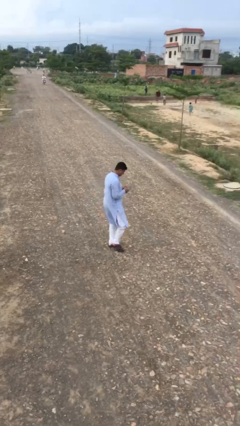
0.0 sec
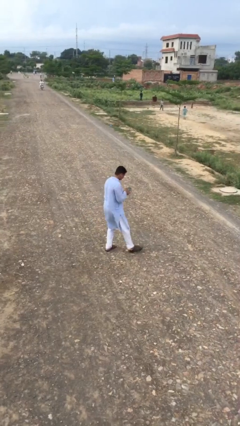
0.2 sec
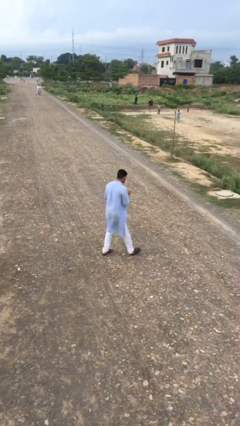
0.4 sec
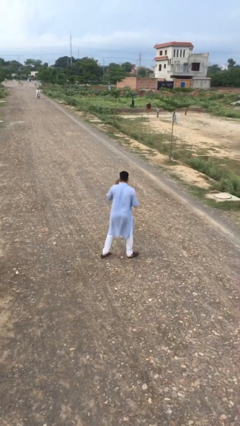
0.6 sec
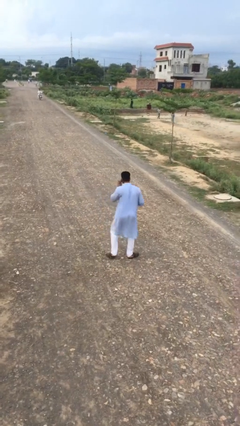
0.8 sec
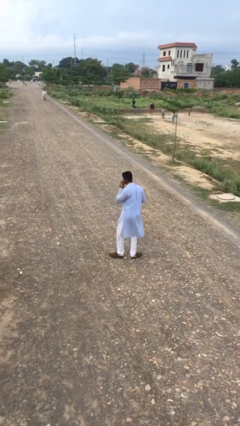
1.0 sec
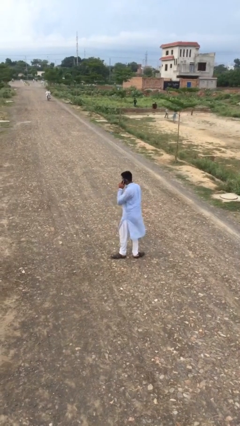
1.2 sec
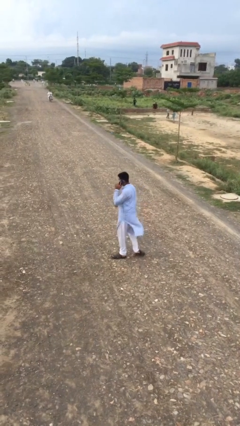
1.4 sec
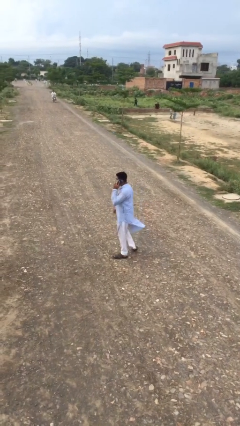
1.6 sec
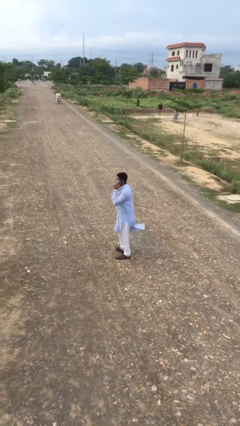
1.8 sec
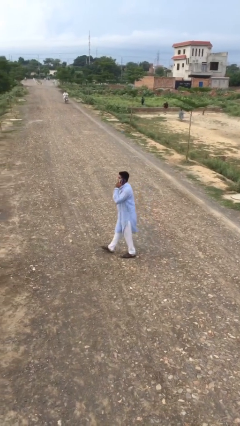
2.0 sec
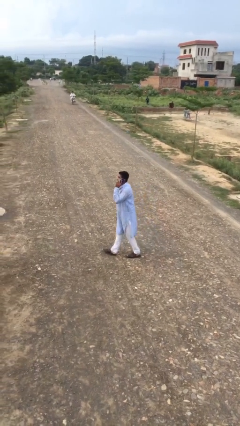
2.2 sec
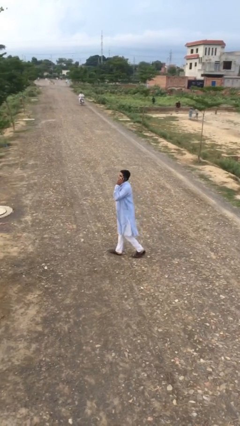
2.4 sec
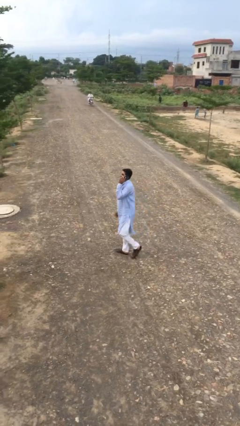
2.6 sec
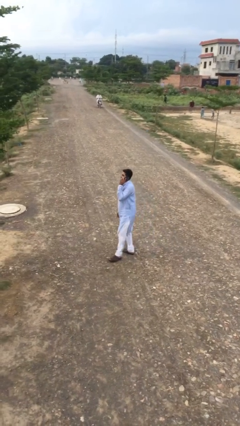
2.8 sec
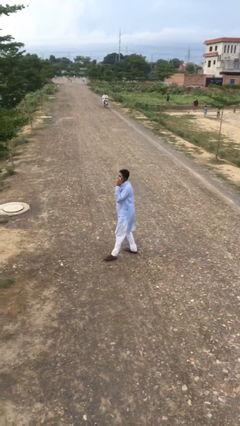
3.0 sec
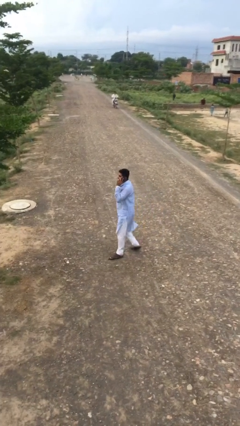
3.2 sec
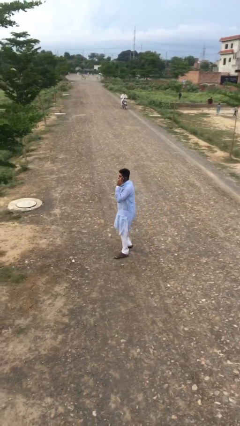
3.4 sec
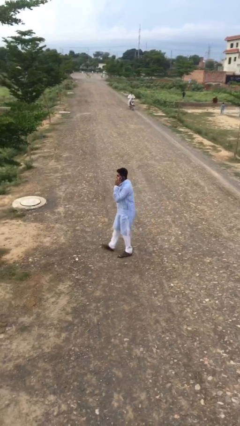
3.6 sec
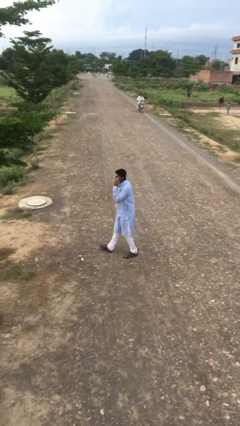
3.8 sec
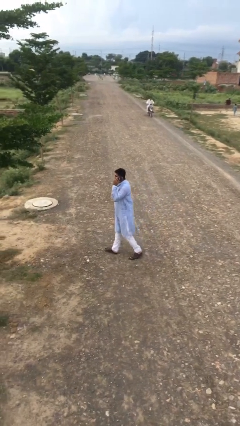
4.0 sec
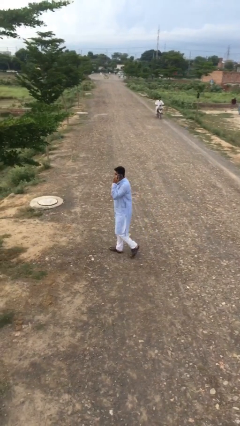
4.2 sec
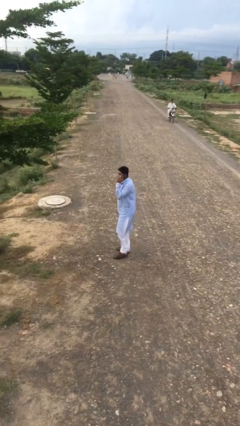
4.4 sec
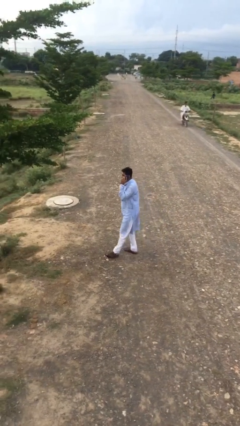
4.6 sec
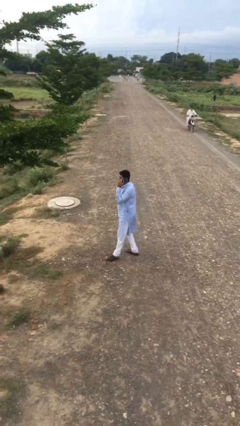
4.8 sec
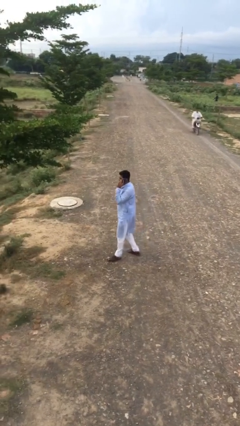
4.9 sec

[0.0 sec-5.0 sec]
person talks on phone

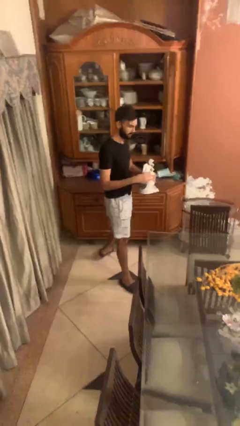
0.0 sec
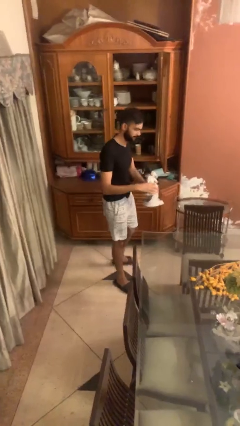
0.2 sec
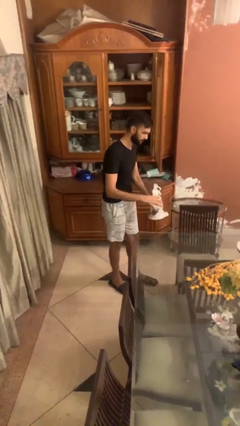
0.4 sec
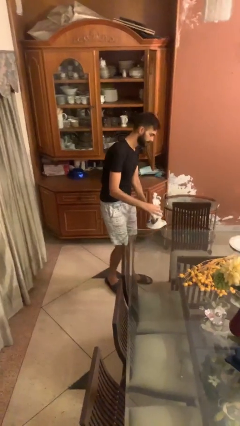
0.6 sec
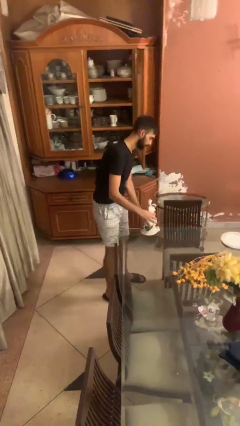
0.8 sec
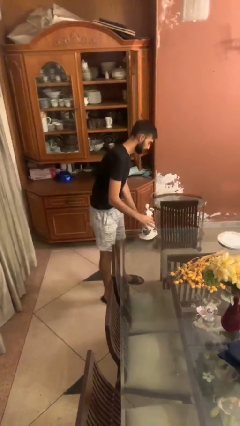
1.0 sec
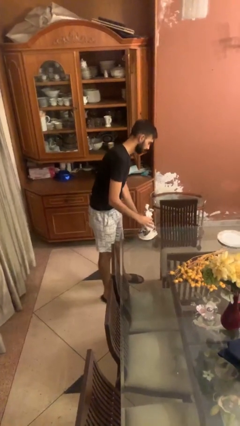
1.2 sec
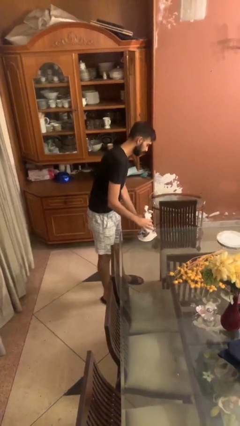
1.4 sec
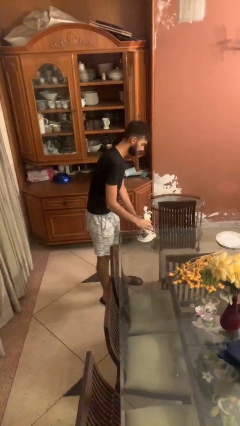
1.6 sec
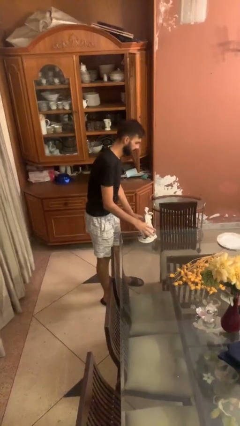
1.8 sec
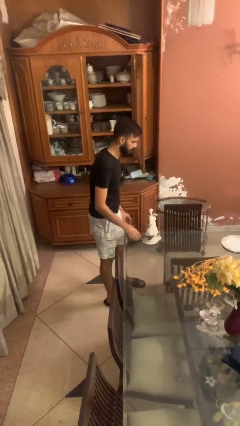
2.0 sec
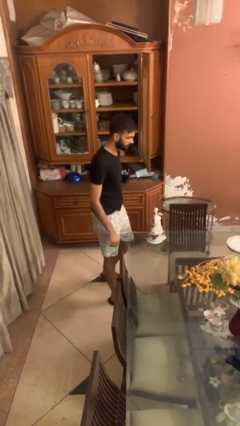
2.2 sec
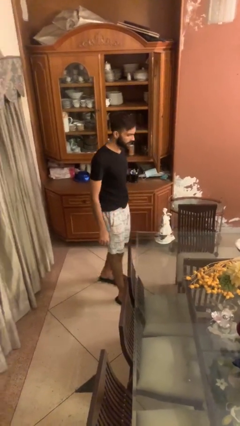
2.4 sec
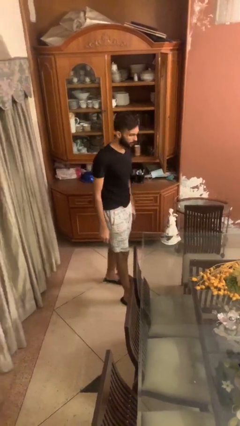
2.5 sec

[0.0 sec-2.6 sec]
person puts down object on table

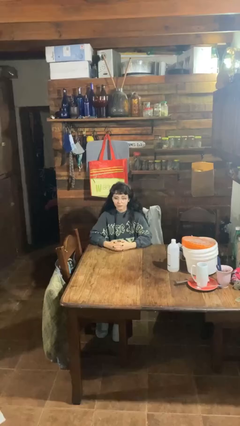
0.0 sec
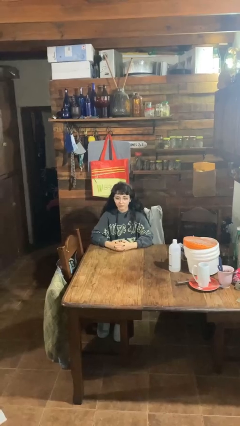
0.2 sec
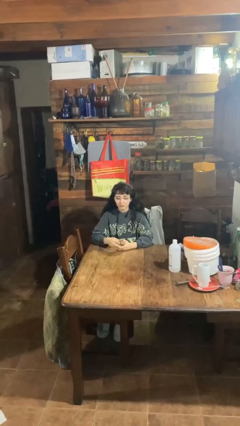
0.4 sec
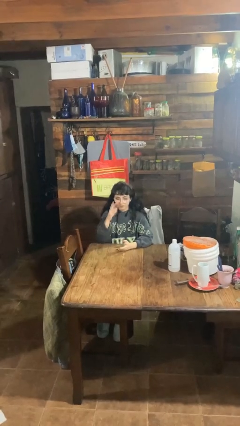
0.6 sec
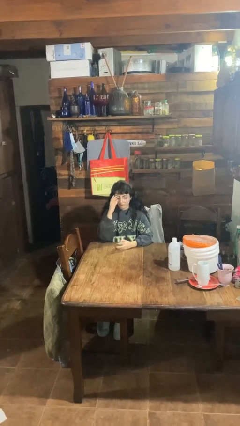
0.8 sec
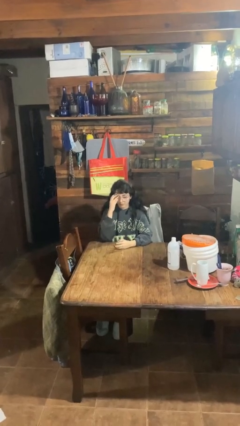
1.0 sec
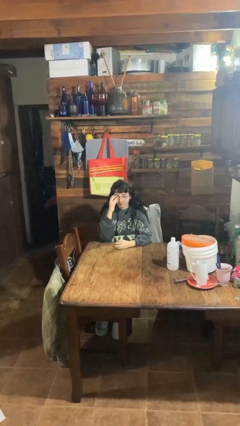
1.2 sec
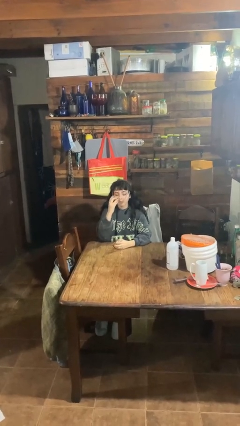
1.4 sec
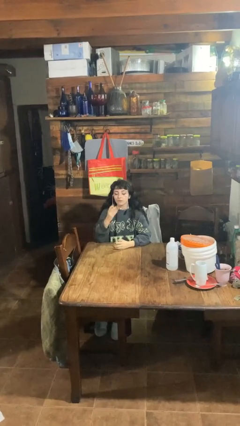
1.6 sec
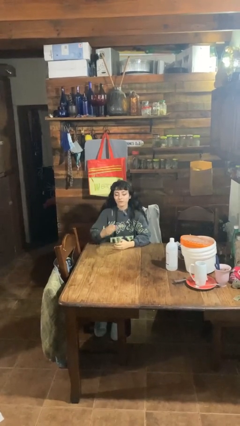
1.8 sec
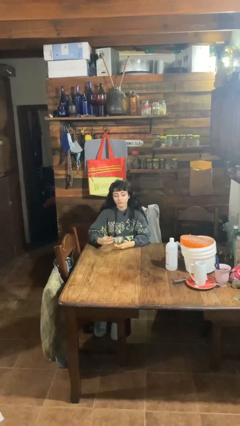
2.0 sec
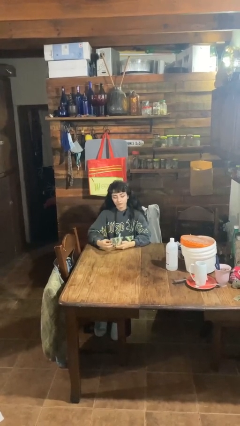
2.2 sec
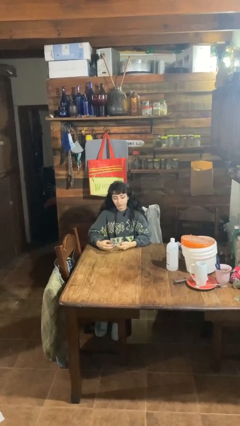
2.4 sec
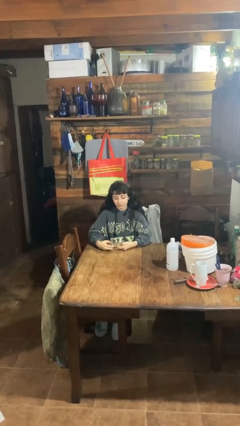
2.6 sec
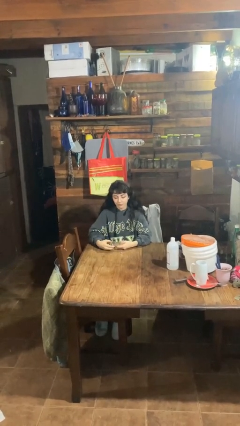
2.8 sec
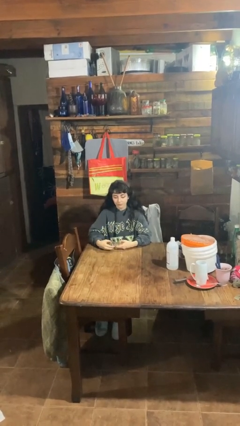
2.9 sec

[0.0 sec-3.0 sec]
person takes off glasses

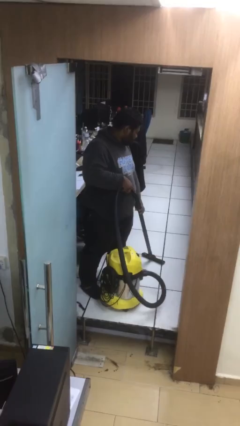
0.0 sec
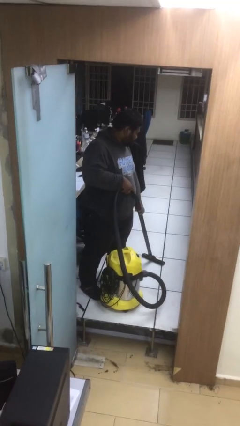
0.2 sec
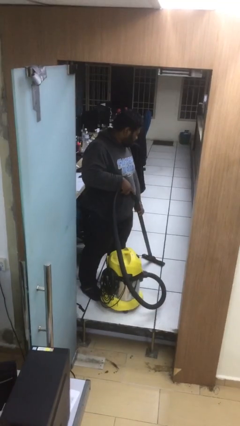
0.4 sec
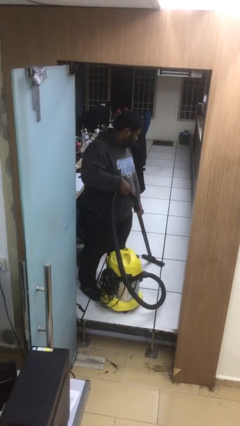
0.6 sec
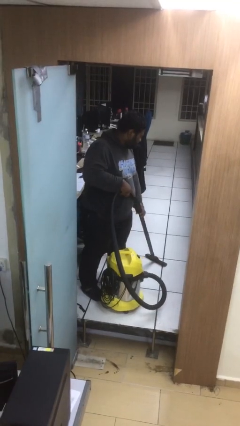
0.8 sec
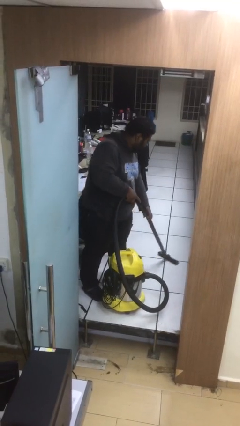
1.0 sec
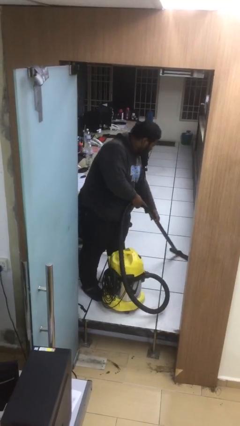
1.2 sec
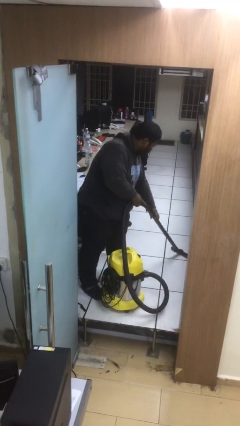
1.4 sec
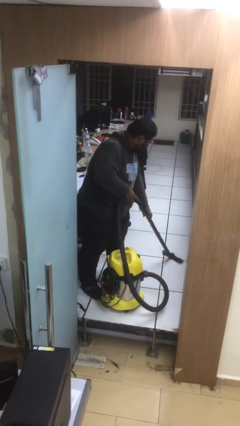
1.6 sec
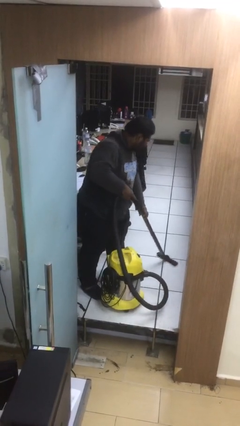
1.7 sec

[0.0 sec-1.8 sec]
person vacuums carpet

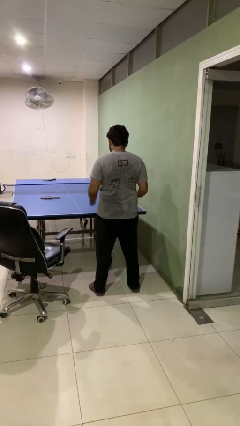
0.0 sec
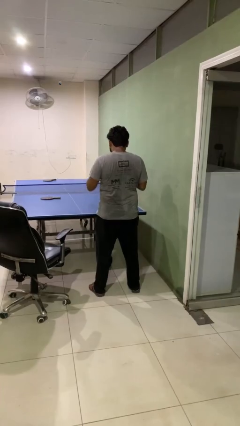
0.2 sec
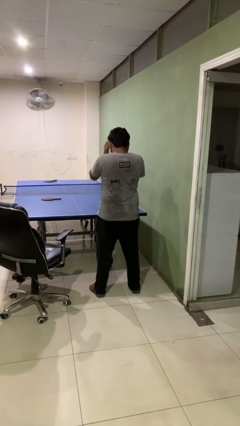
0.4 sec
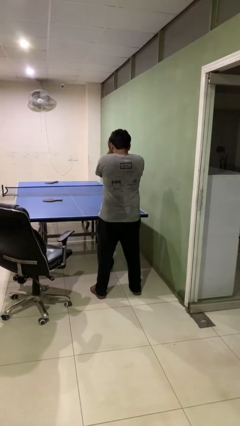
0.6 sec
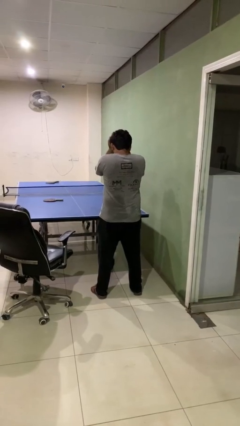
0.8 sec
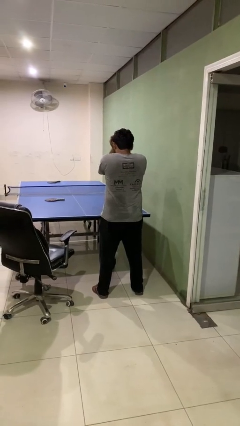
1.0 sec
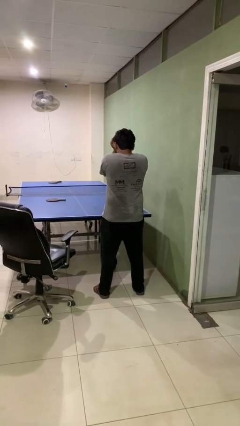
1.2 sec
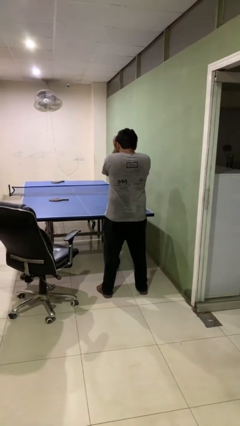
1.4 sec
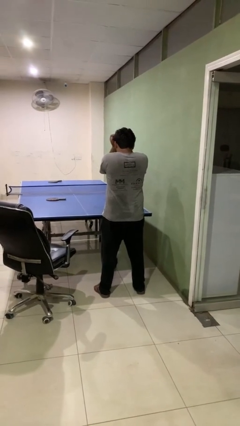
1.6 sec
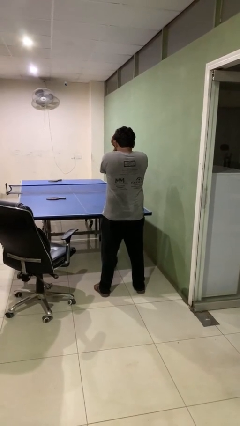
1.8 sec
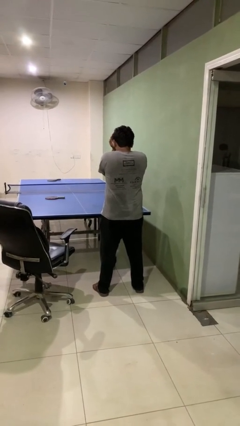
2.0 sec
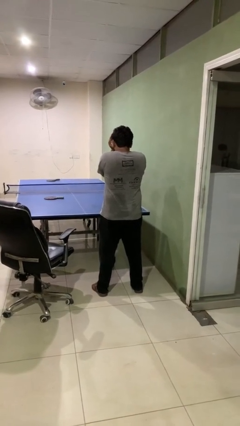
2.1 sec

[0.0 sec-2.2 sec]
person rubs eyes

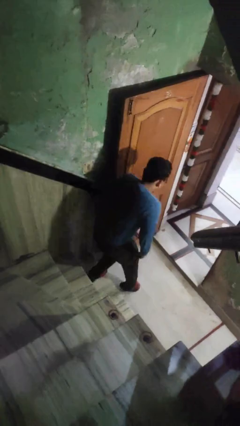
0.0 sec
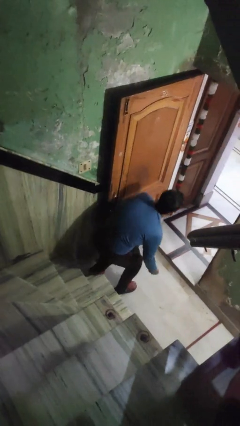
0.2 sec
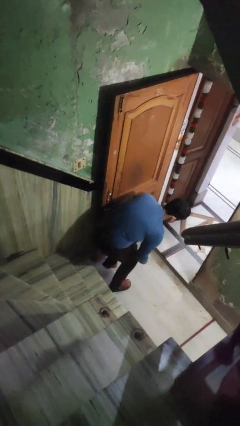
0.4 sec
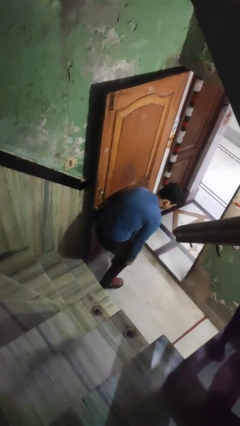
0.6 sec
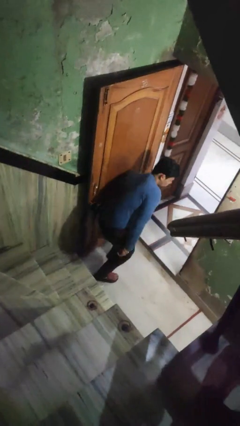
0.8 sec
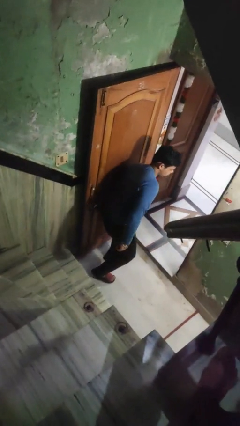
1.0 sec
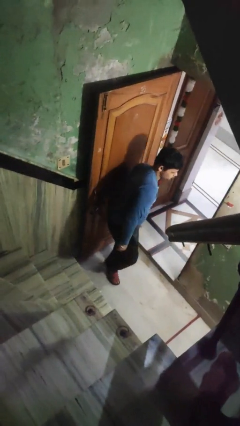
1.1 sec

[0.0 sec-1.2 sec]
person trips on stair

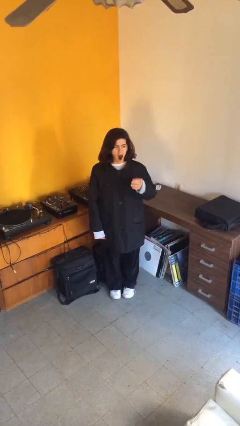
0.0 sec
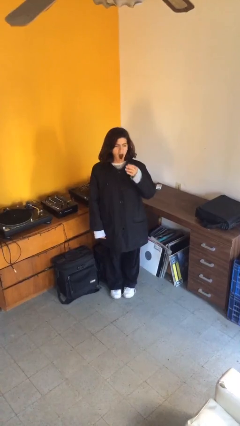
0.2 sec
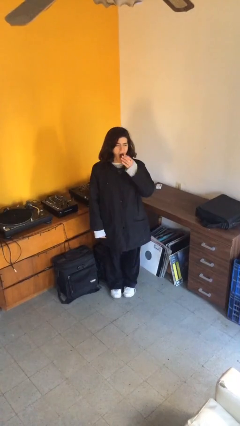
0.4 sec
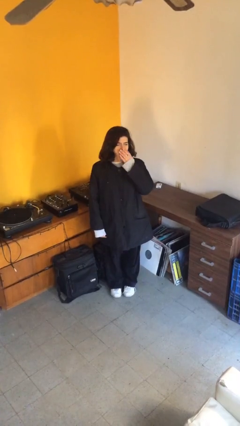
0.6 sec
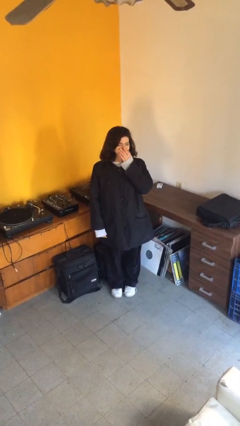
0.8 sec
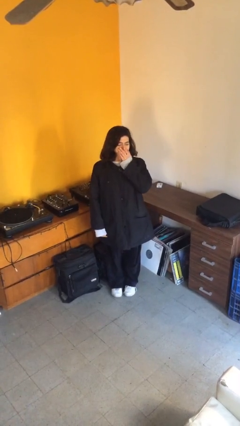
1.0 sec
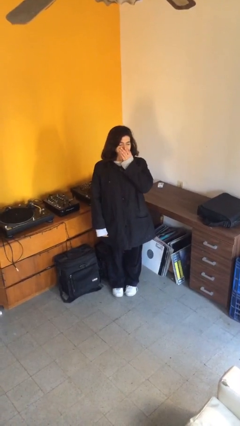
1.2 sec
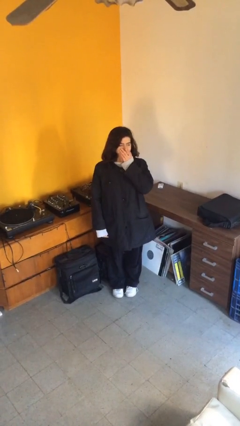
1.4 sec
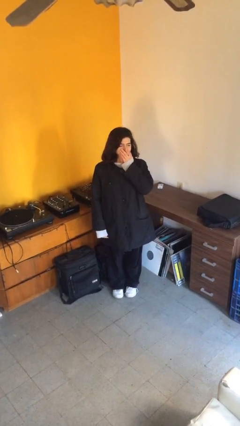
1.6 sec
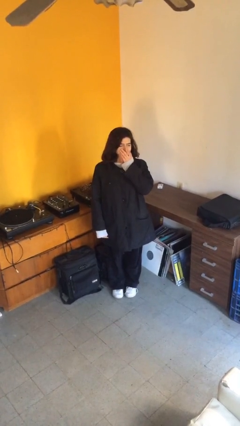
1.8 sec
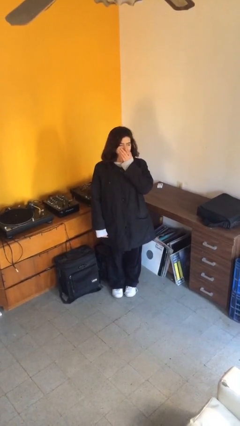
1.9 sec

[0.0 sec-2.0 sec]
person yawns
